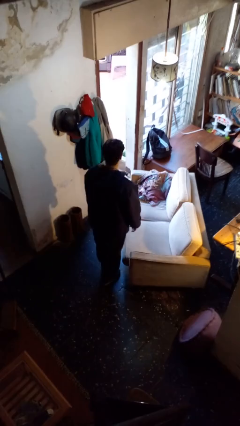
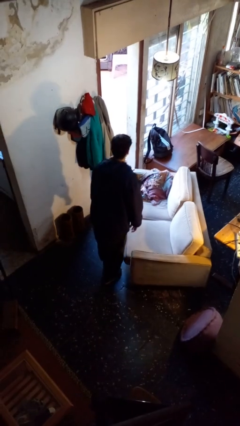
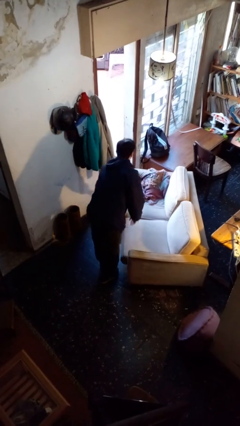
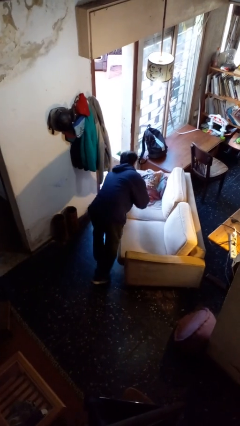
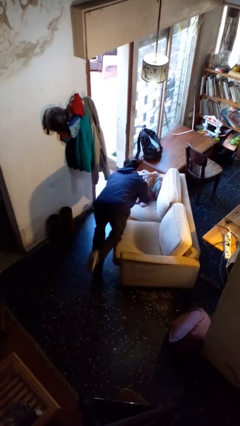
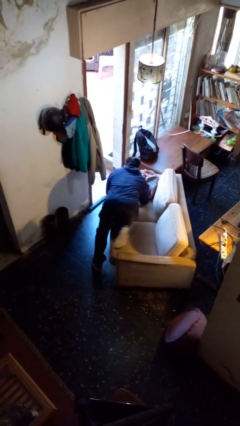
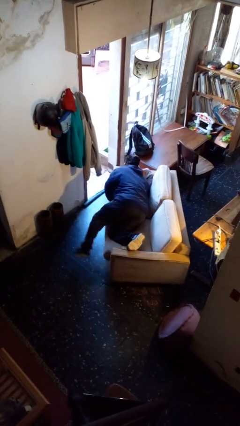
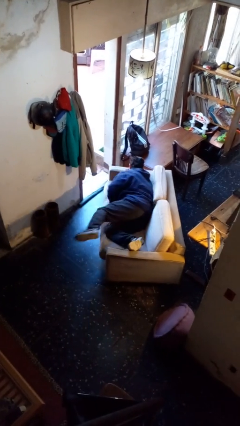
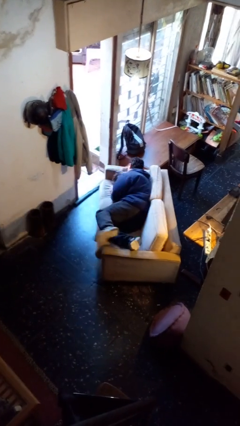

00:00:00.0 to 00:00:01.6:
person lies down on couch

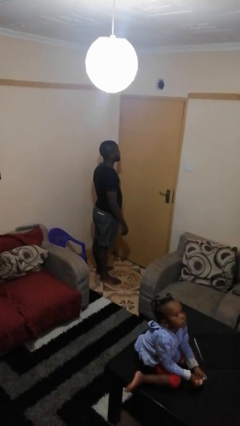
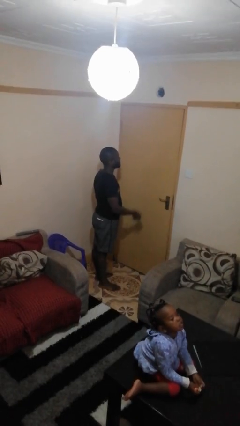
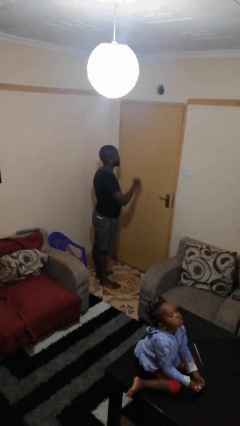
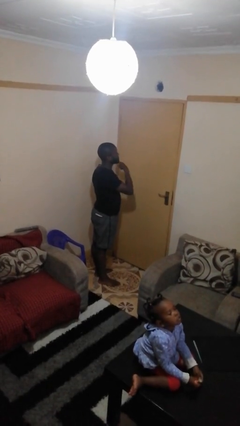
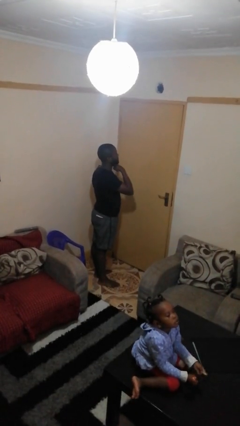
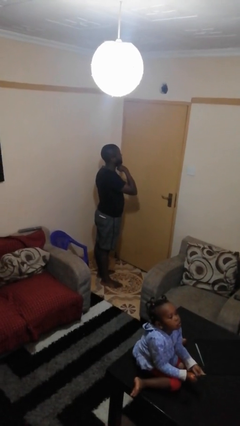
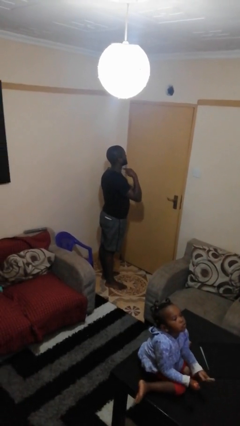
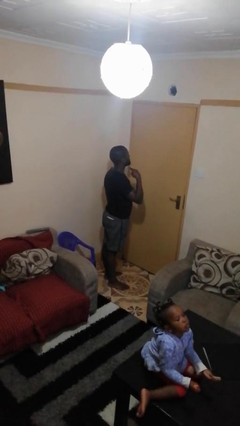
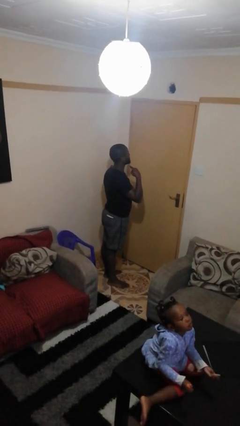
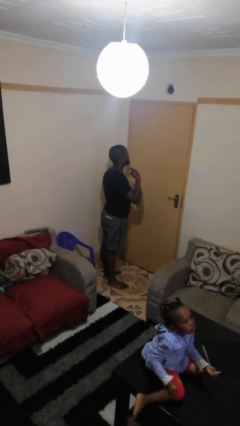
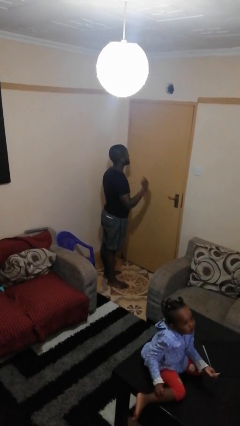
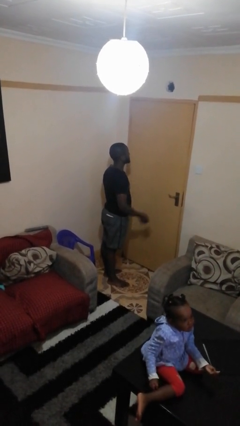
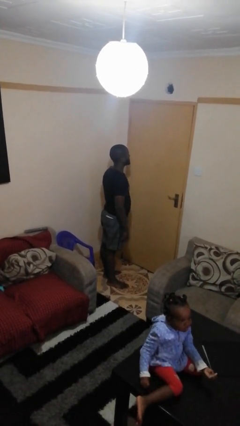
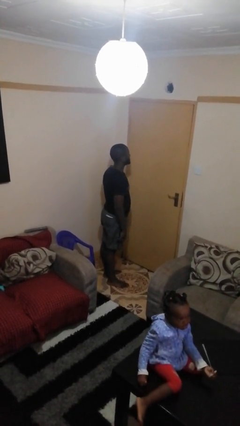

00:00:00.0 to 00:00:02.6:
person gestures cut

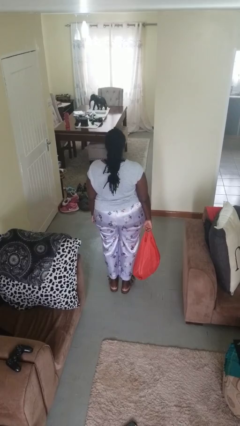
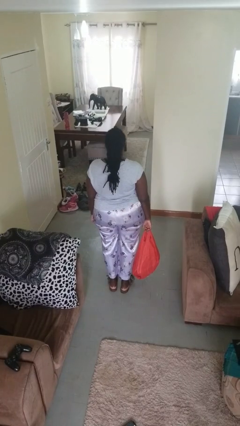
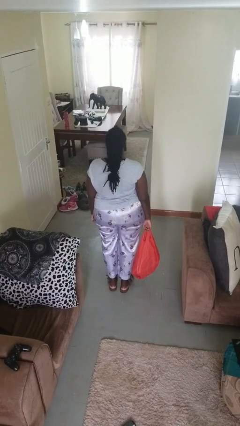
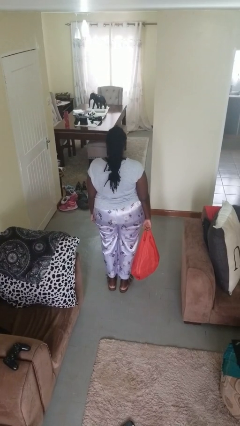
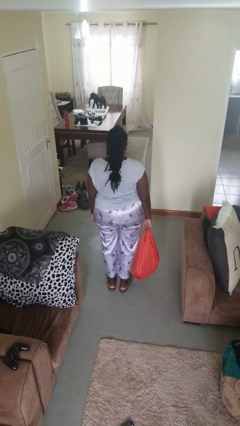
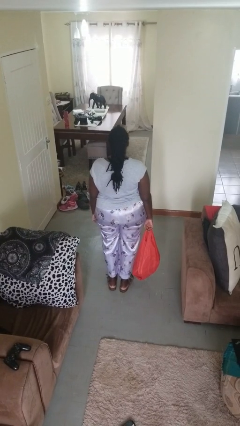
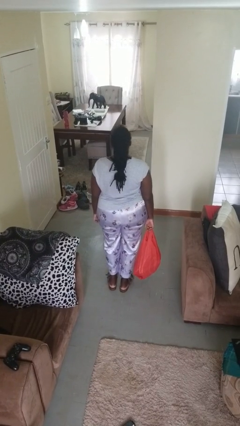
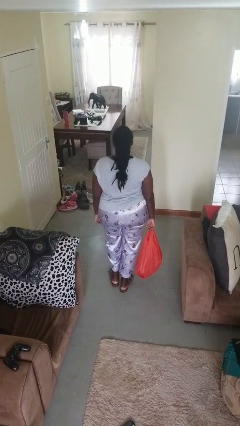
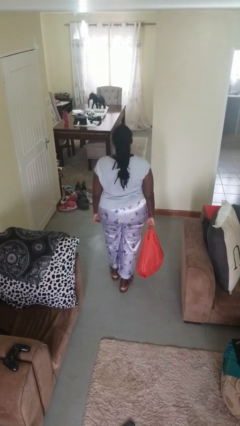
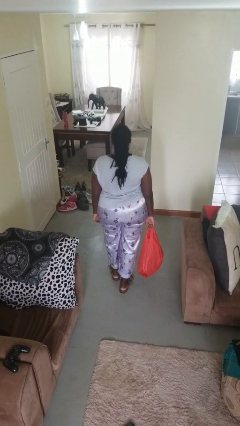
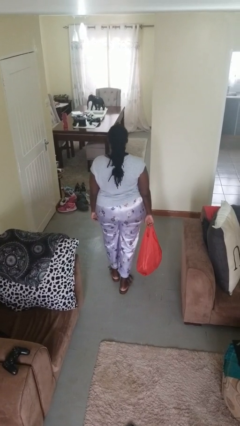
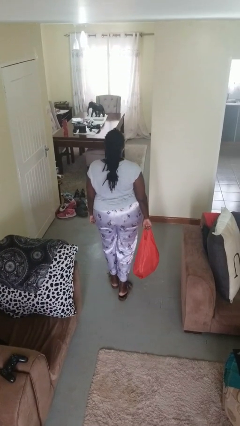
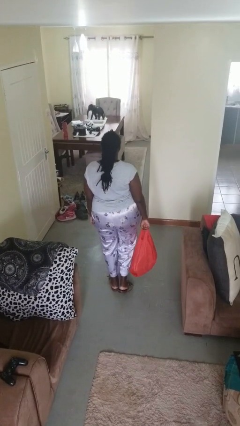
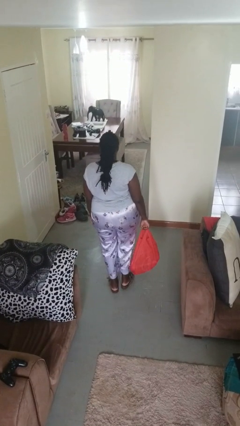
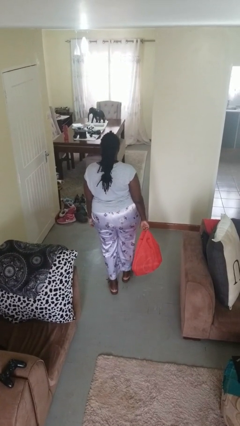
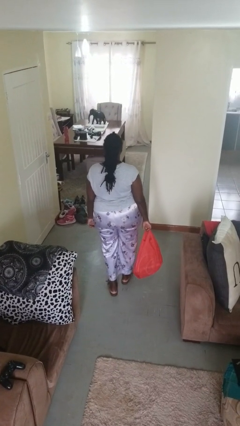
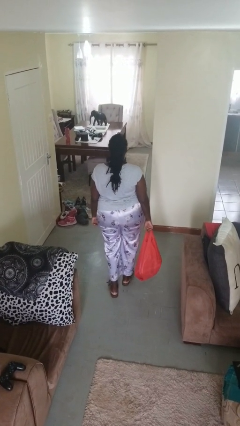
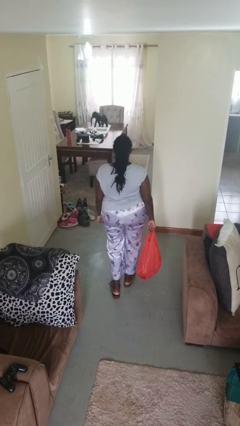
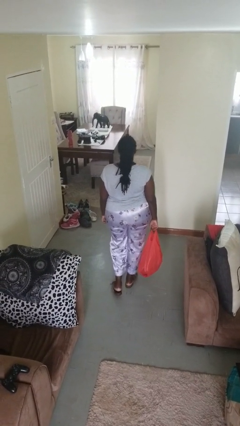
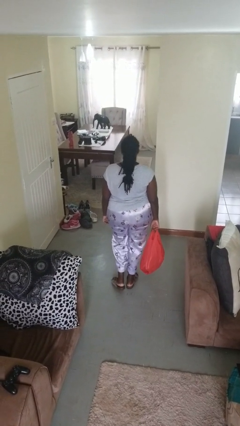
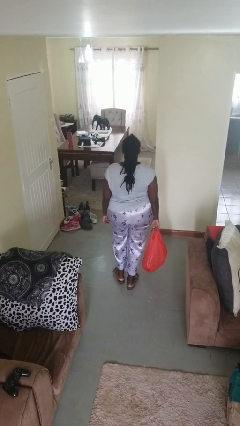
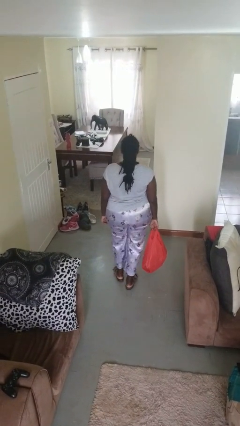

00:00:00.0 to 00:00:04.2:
person carries groceries

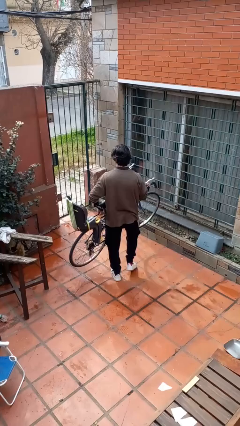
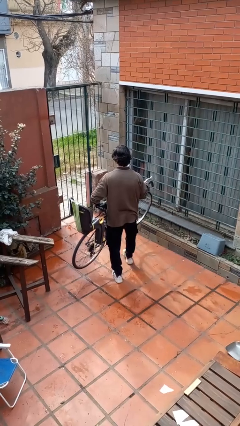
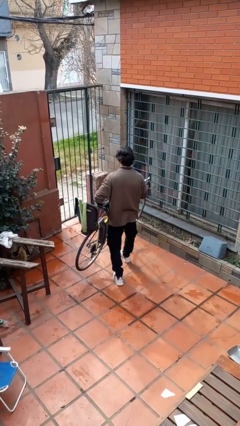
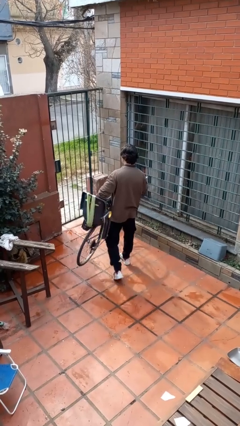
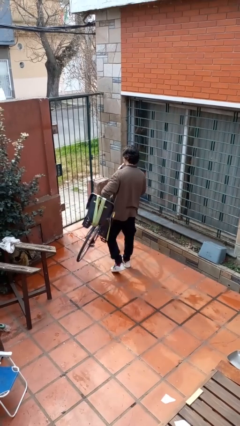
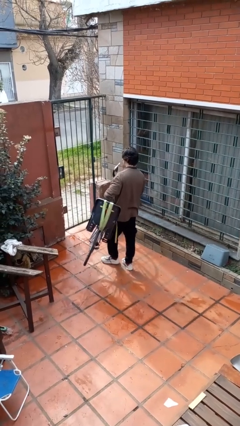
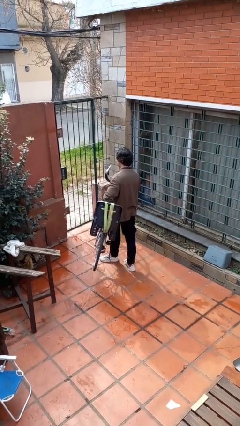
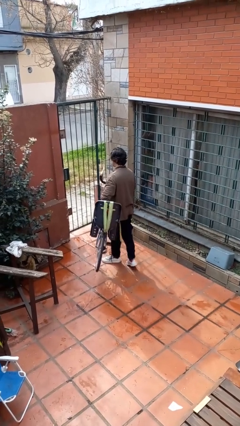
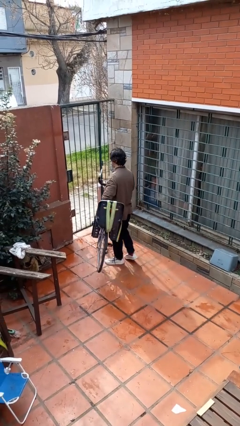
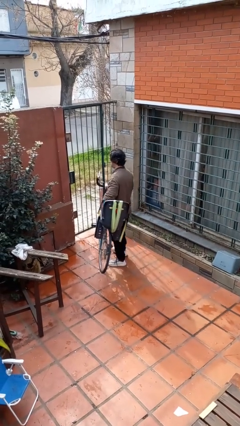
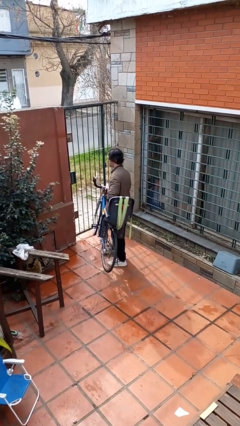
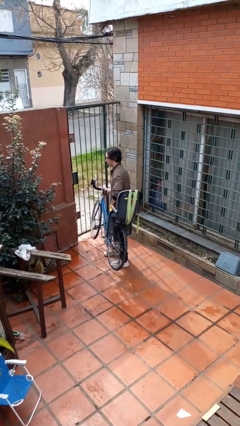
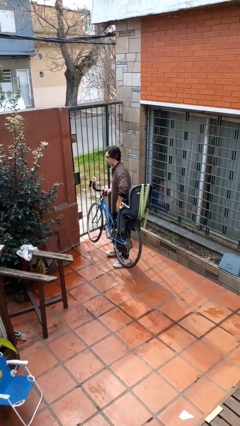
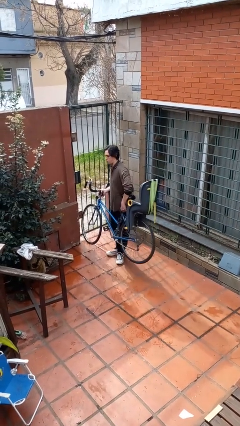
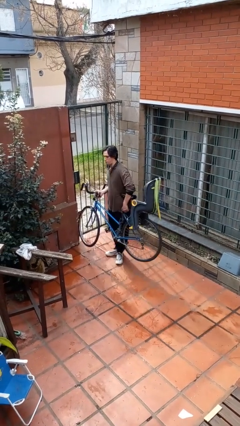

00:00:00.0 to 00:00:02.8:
person carries bicycle

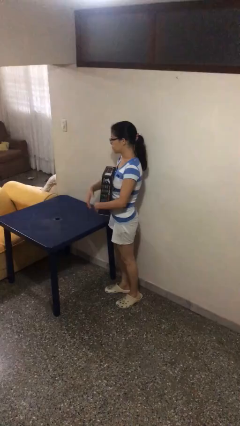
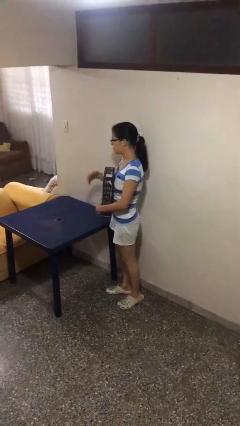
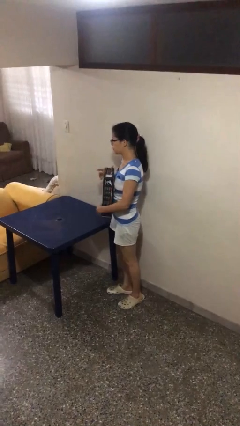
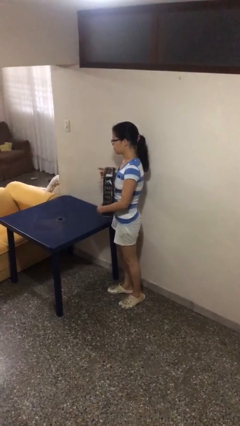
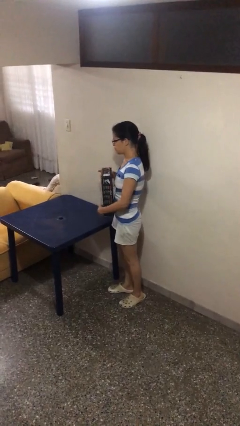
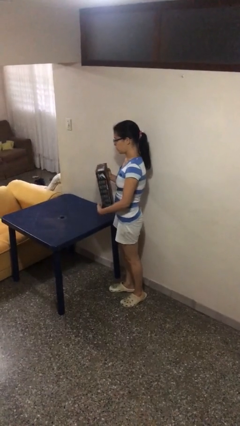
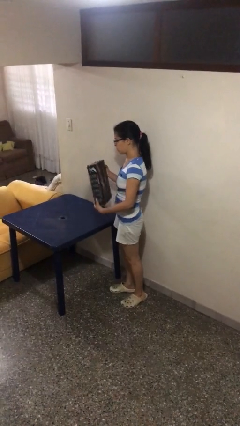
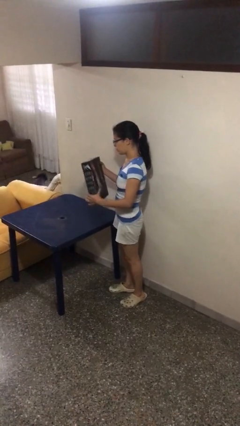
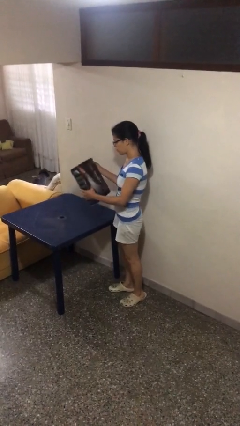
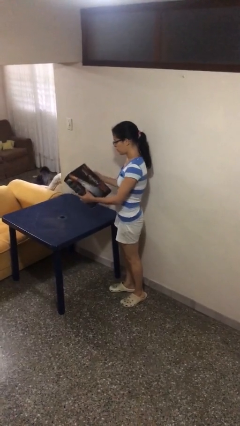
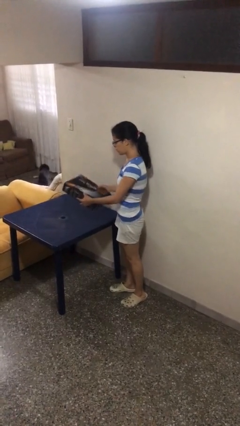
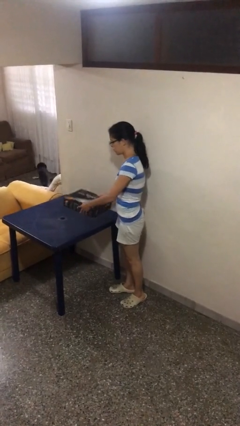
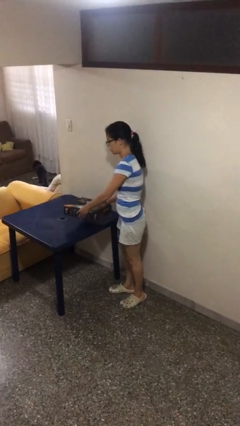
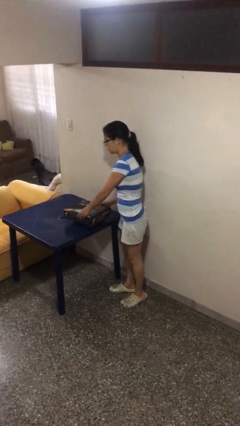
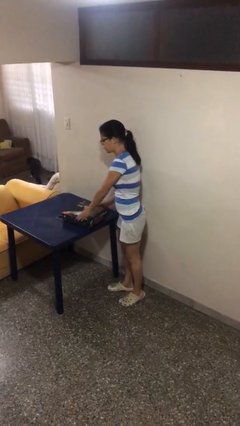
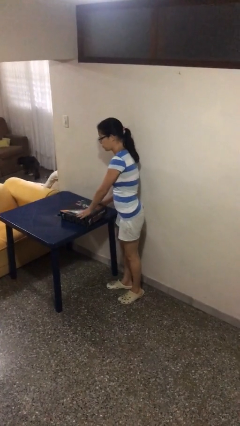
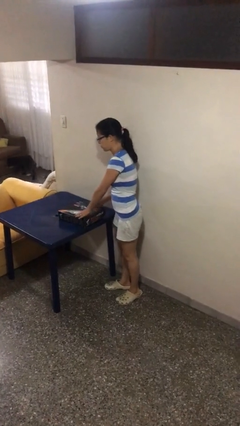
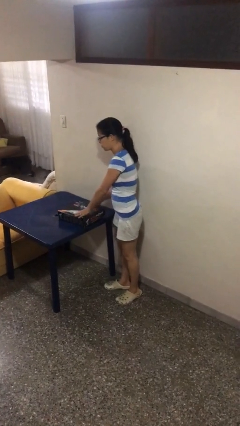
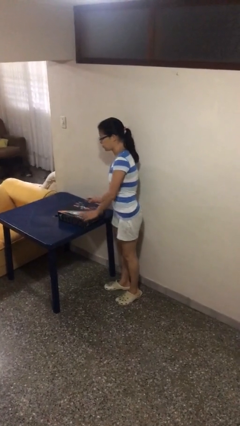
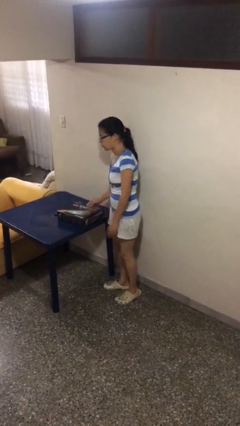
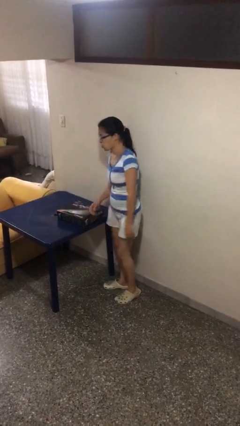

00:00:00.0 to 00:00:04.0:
person puts down object on table

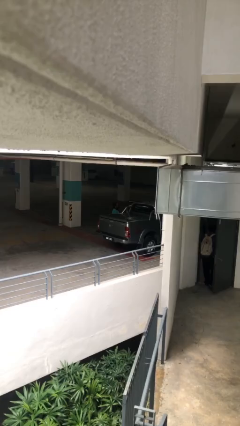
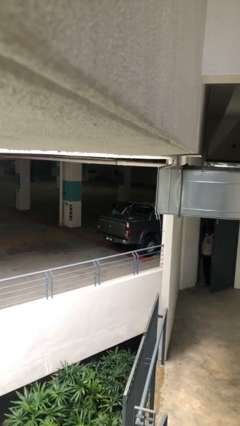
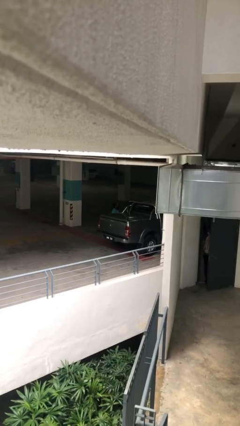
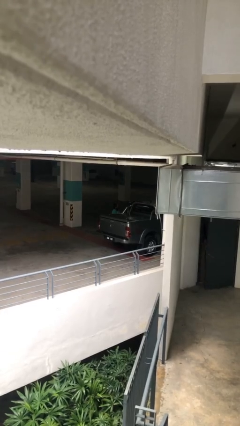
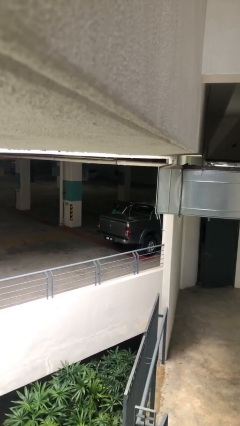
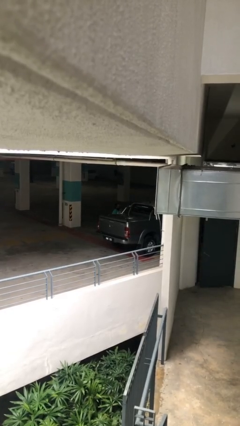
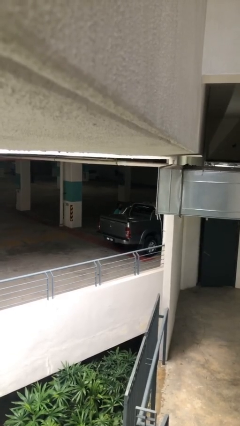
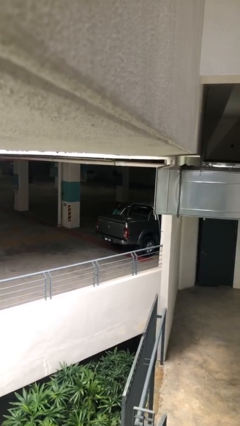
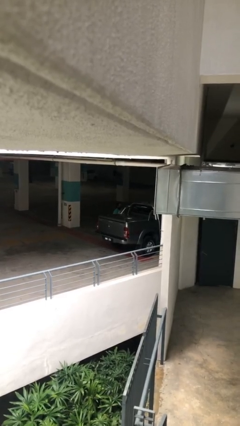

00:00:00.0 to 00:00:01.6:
person opens car door

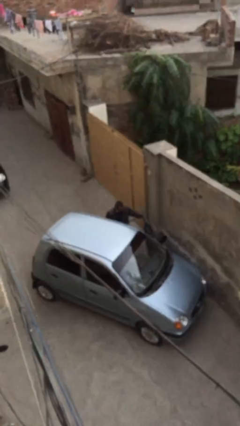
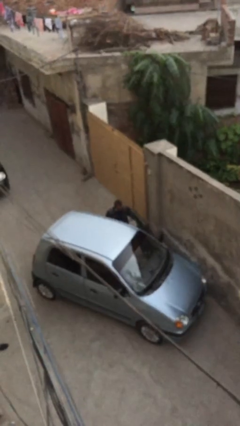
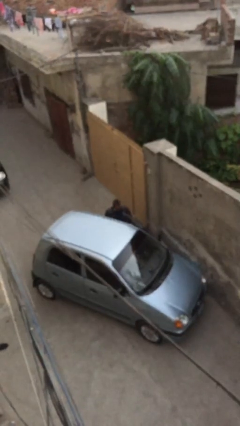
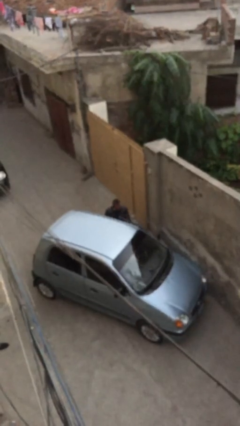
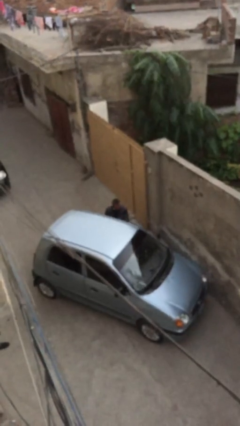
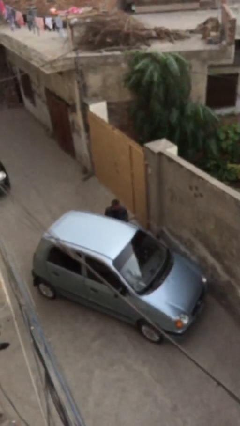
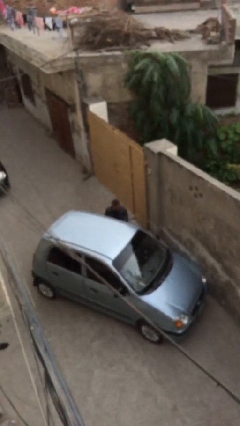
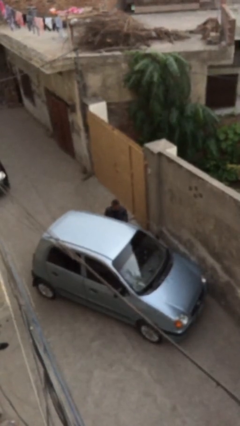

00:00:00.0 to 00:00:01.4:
person closes car door
